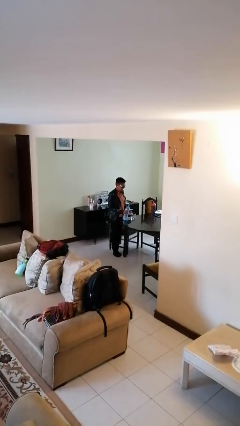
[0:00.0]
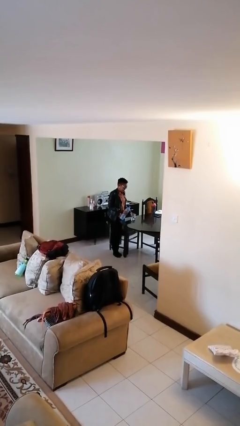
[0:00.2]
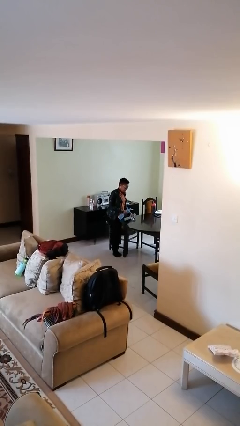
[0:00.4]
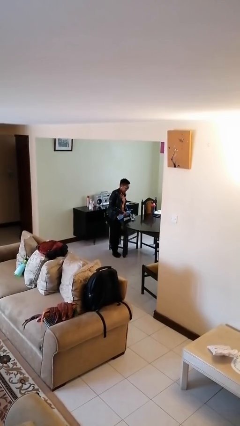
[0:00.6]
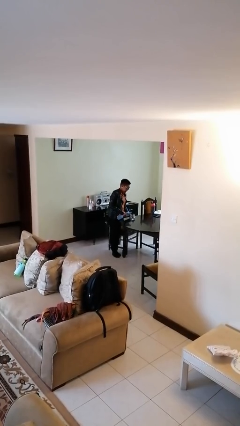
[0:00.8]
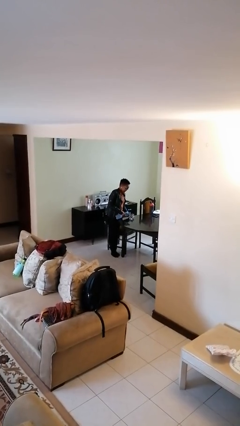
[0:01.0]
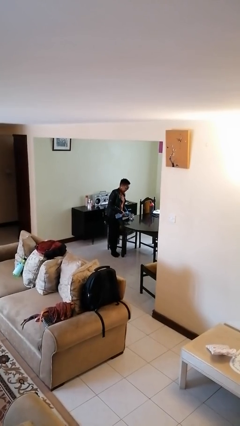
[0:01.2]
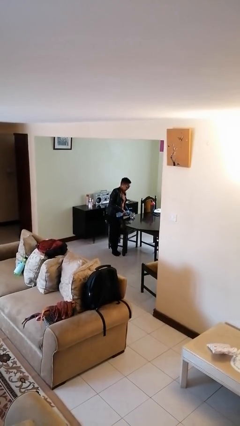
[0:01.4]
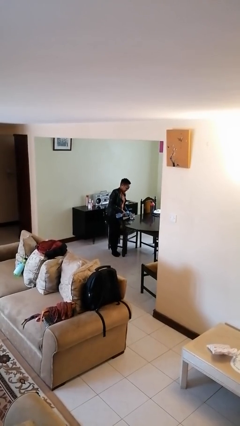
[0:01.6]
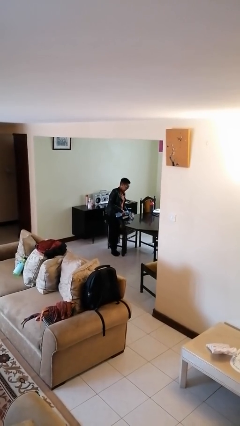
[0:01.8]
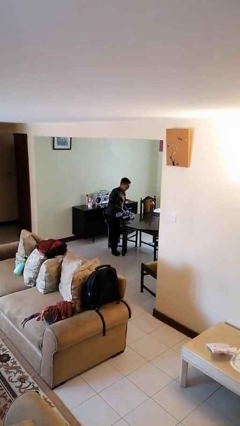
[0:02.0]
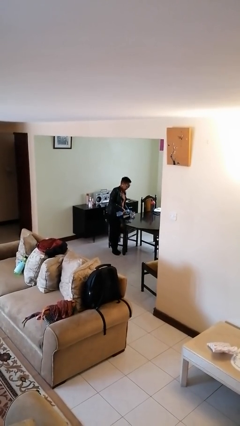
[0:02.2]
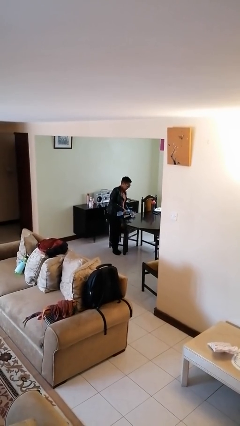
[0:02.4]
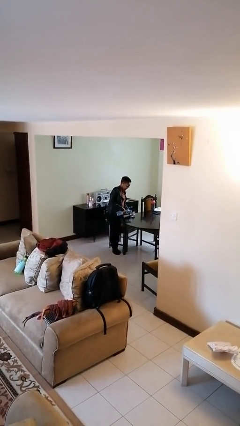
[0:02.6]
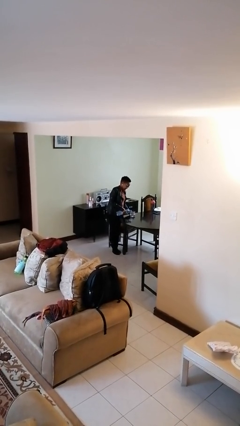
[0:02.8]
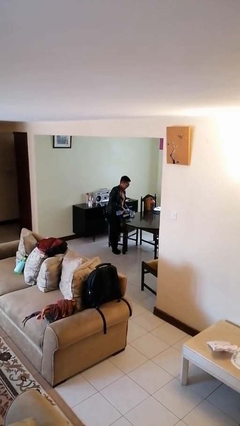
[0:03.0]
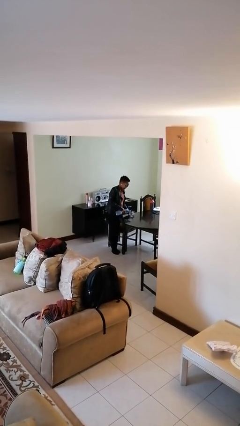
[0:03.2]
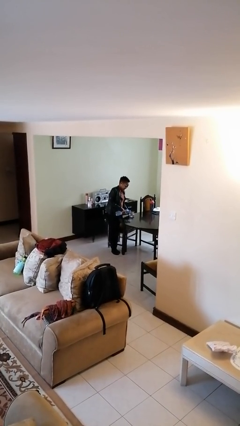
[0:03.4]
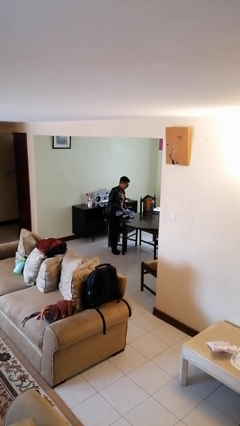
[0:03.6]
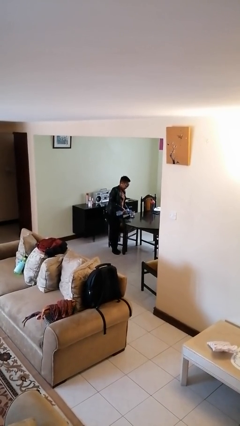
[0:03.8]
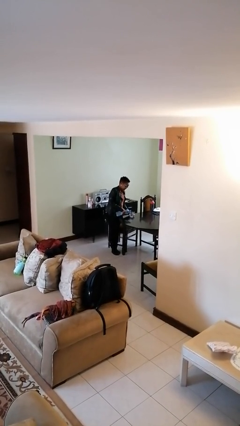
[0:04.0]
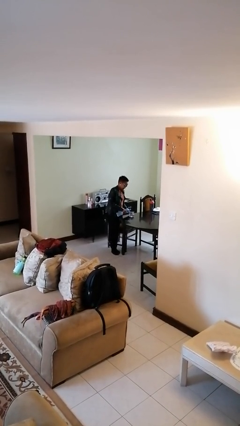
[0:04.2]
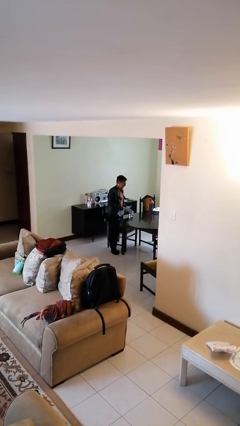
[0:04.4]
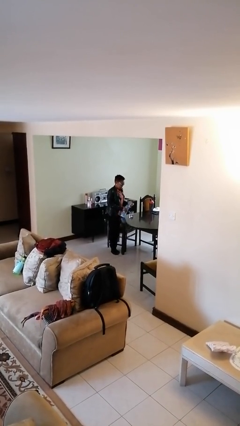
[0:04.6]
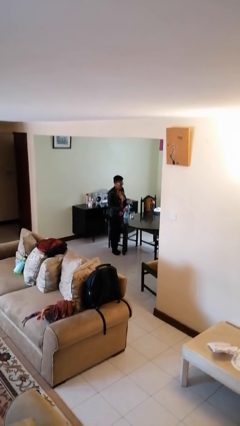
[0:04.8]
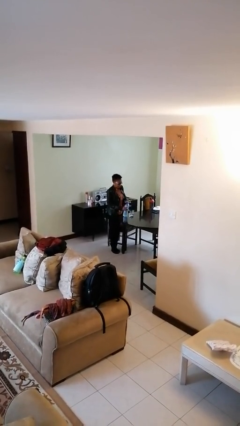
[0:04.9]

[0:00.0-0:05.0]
person pours liquid into cup

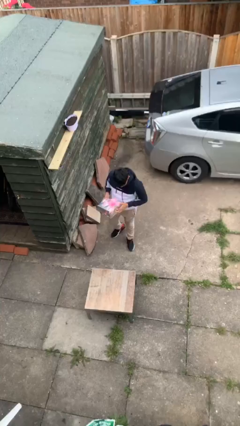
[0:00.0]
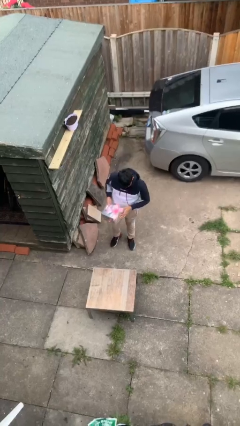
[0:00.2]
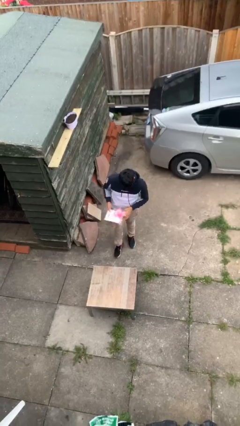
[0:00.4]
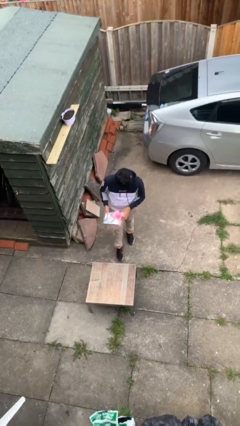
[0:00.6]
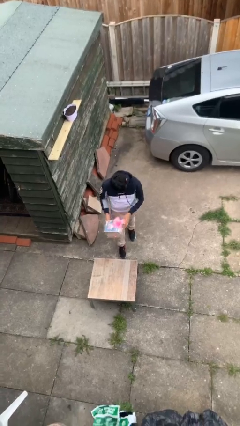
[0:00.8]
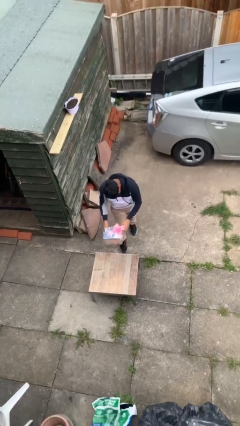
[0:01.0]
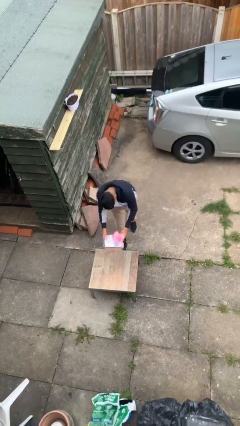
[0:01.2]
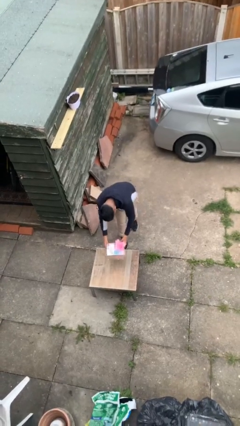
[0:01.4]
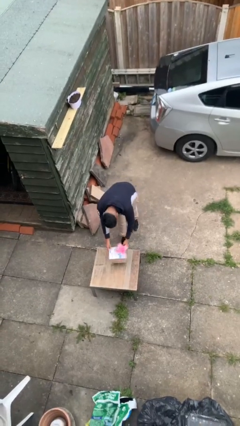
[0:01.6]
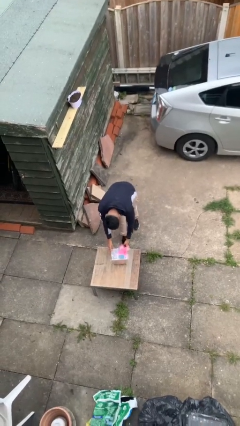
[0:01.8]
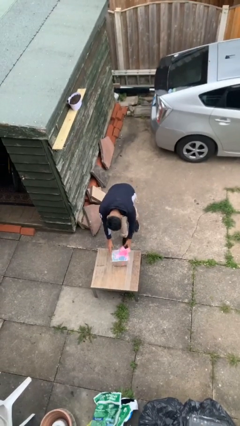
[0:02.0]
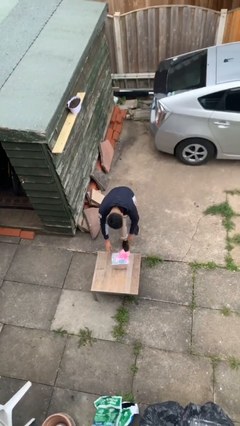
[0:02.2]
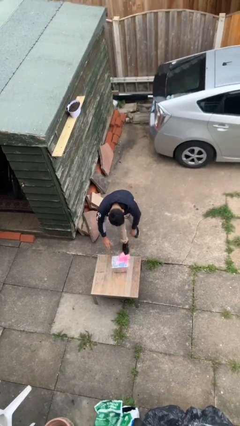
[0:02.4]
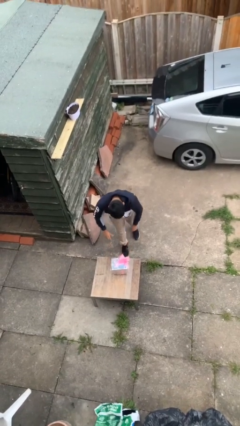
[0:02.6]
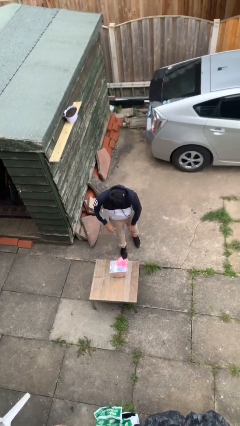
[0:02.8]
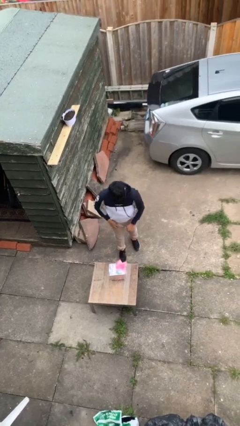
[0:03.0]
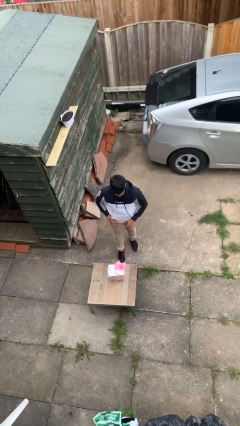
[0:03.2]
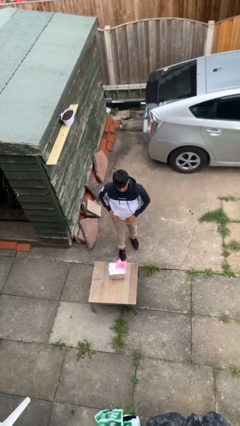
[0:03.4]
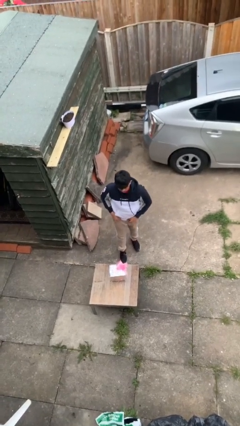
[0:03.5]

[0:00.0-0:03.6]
person puts down object on table

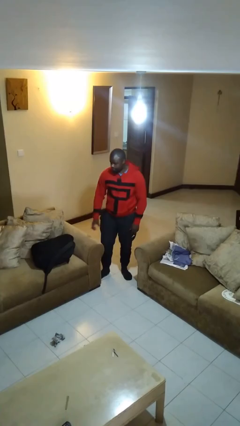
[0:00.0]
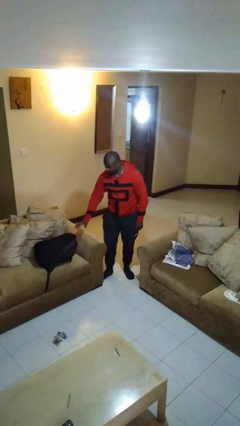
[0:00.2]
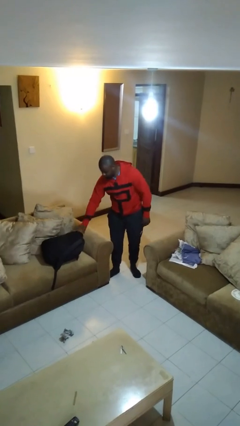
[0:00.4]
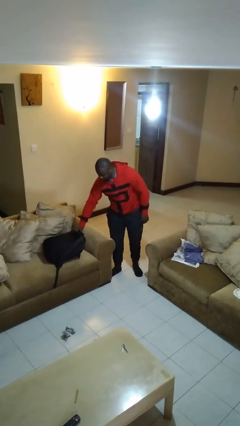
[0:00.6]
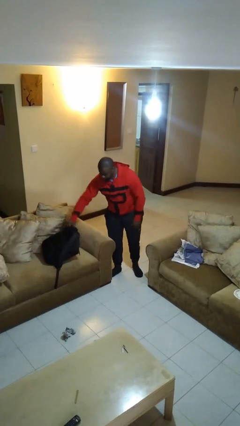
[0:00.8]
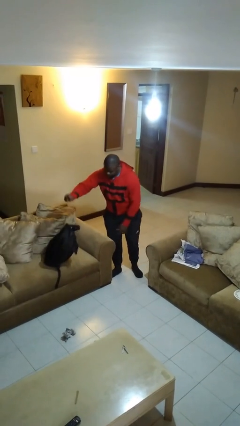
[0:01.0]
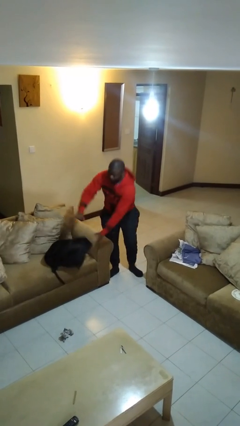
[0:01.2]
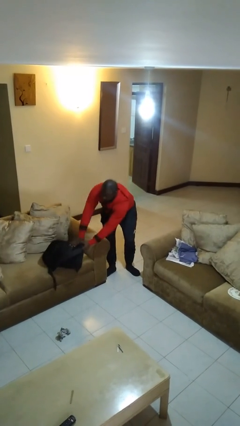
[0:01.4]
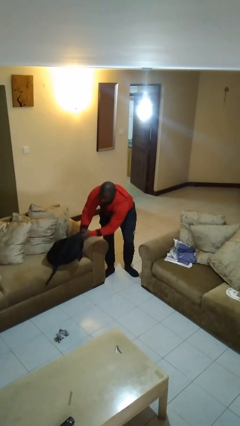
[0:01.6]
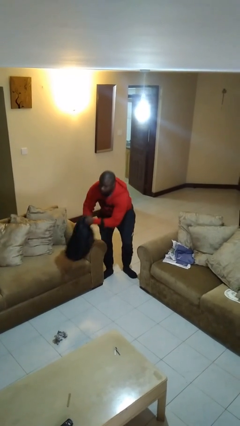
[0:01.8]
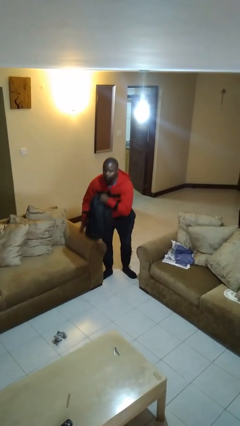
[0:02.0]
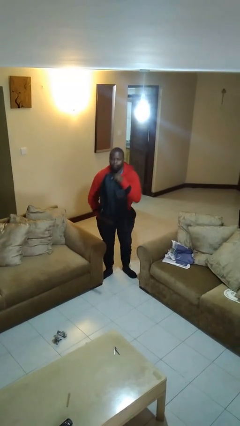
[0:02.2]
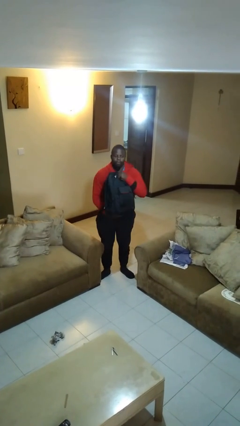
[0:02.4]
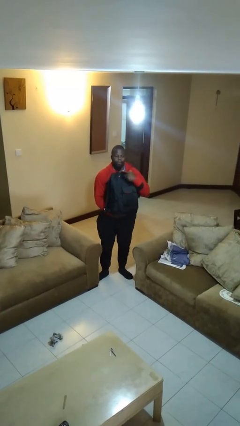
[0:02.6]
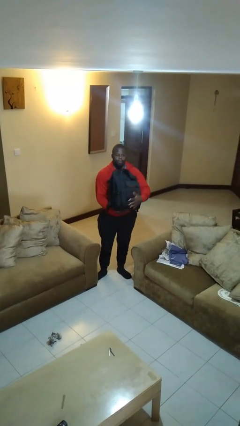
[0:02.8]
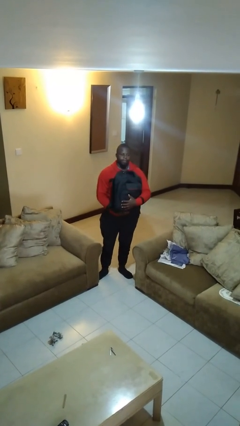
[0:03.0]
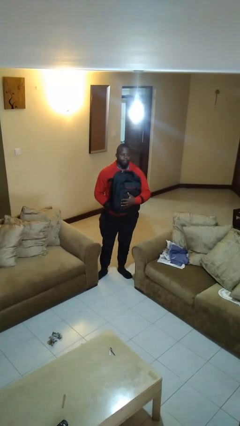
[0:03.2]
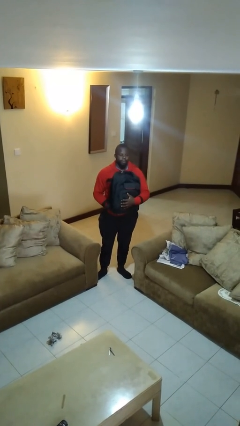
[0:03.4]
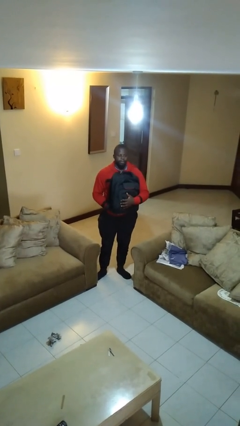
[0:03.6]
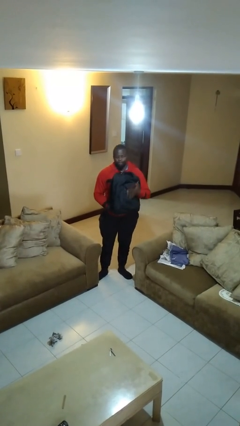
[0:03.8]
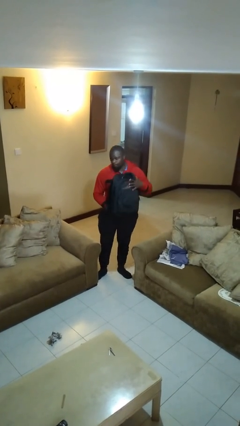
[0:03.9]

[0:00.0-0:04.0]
person picks up object from couch

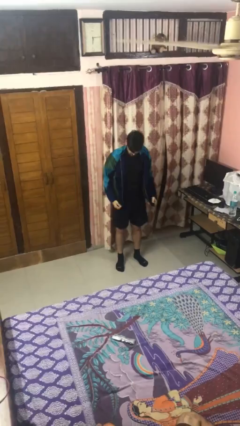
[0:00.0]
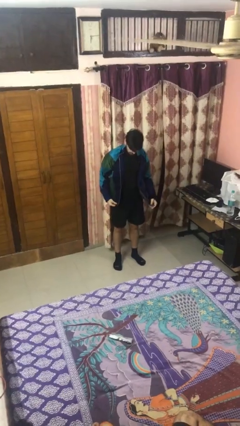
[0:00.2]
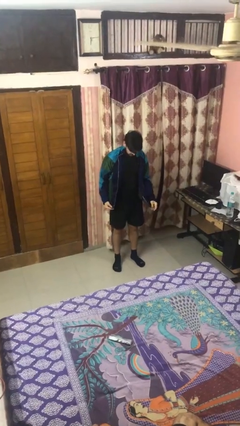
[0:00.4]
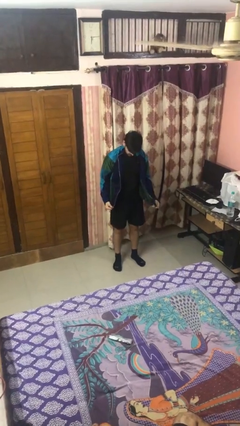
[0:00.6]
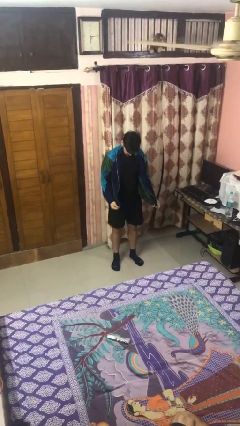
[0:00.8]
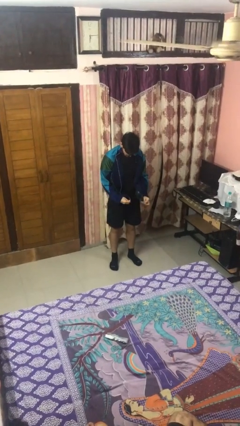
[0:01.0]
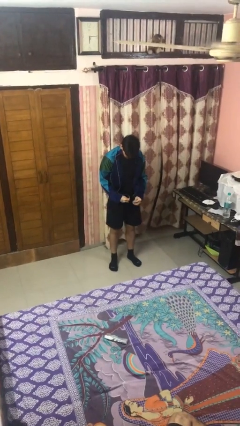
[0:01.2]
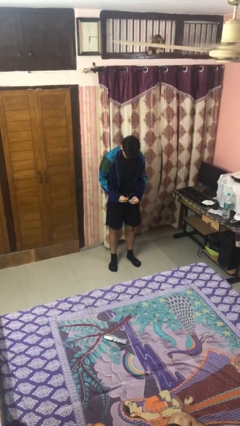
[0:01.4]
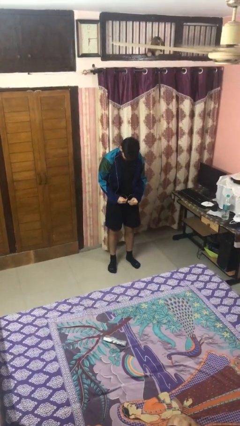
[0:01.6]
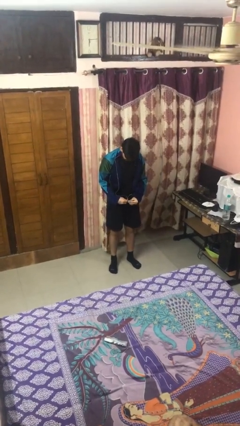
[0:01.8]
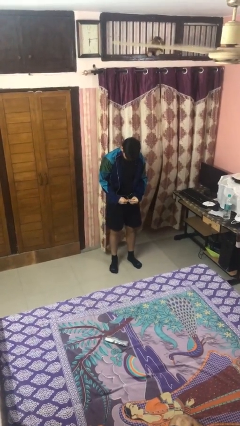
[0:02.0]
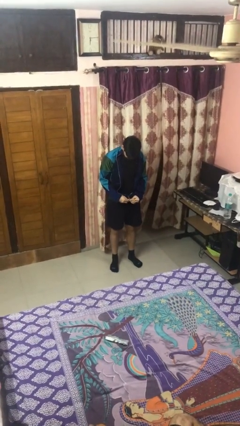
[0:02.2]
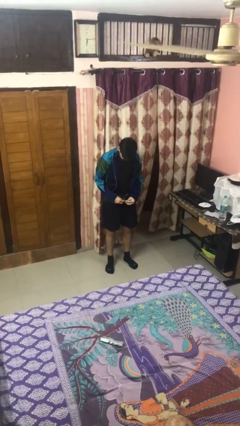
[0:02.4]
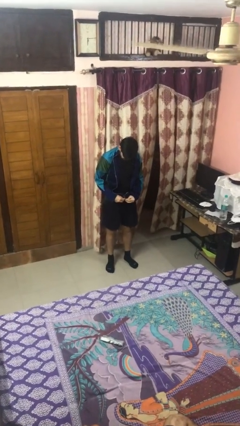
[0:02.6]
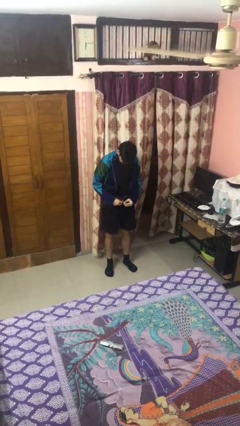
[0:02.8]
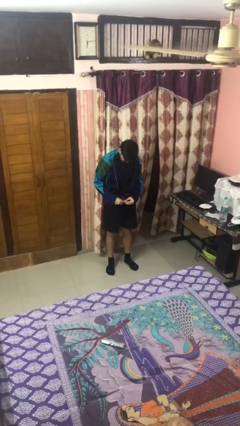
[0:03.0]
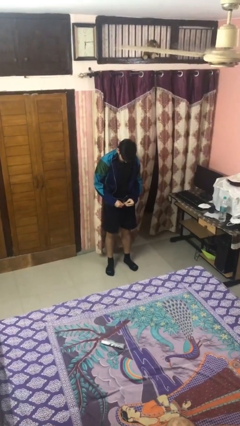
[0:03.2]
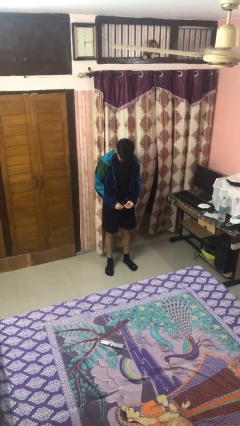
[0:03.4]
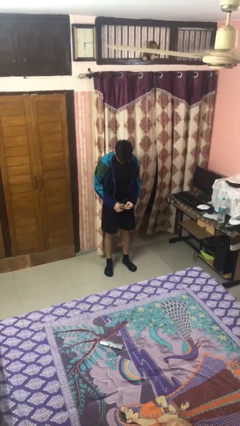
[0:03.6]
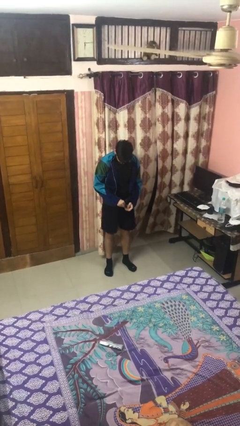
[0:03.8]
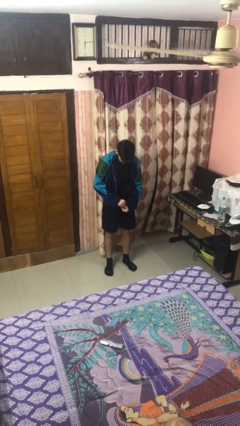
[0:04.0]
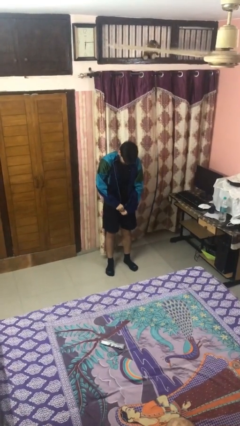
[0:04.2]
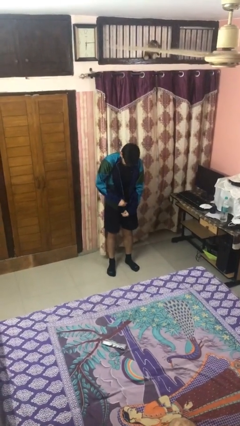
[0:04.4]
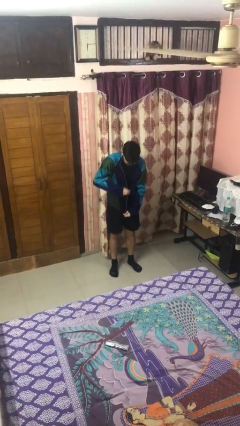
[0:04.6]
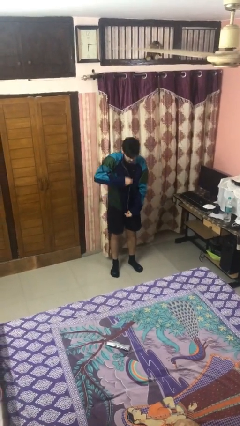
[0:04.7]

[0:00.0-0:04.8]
person zips up jacket
